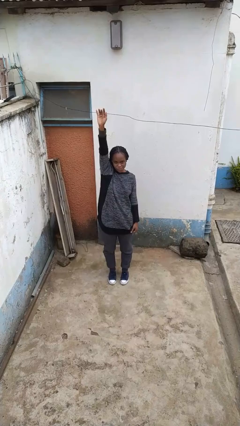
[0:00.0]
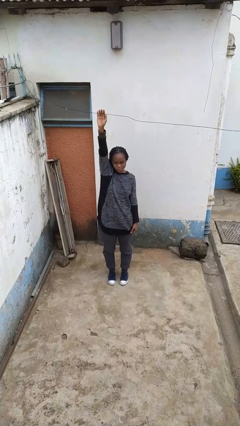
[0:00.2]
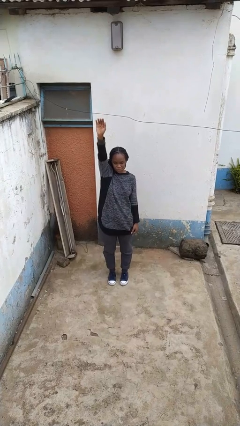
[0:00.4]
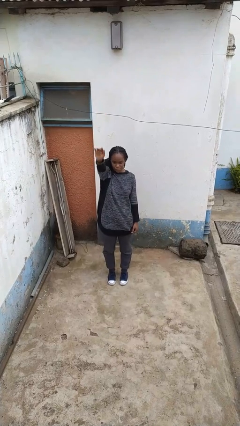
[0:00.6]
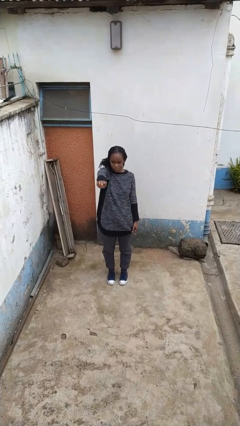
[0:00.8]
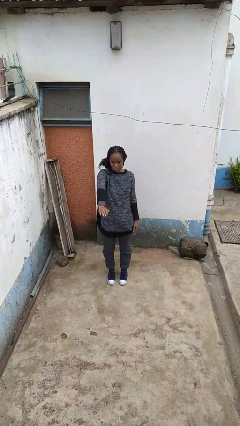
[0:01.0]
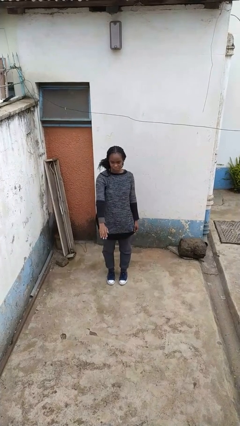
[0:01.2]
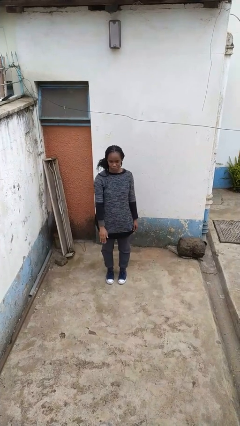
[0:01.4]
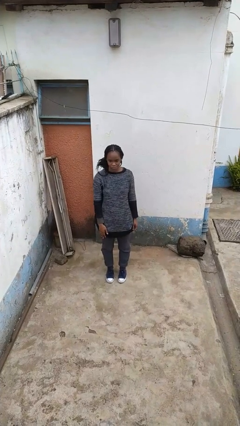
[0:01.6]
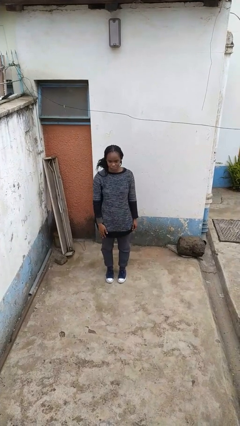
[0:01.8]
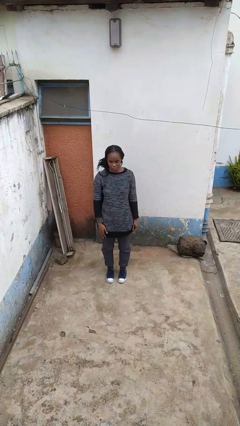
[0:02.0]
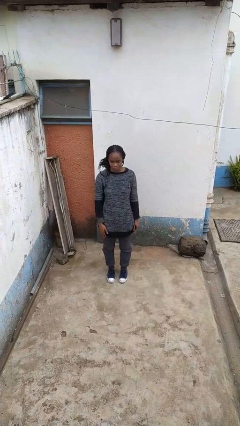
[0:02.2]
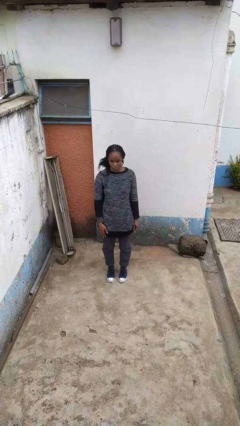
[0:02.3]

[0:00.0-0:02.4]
person gestures lower hand

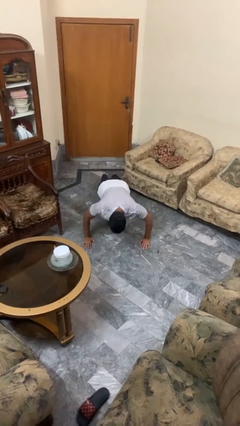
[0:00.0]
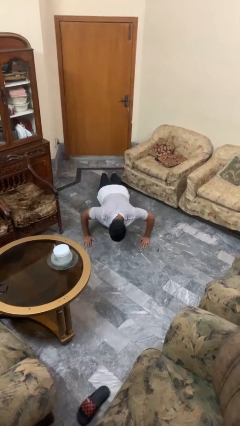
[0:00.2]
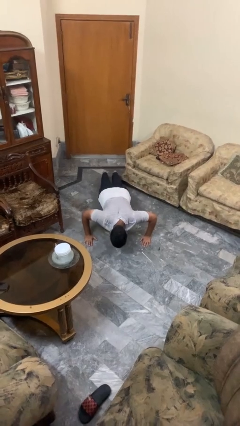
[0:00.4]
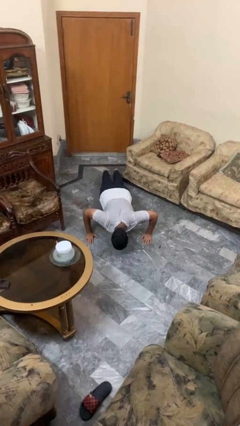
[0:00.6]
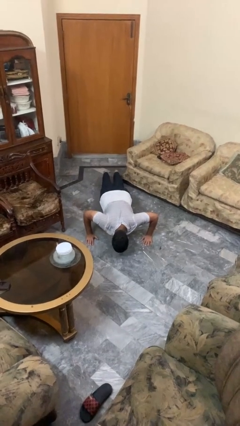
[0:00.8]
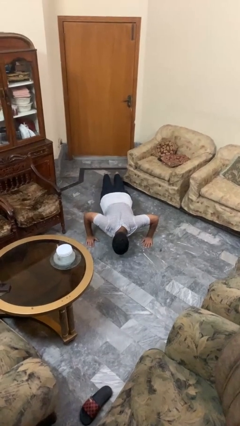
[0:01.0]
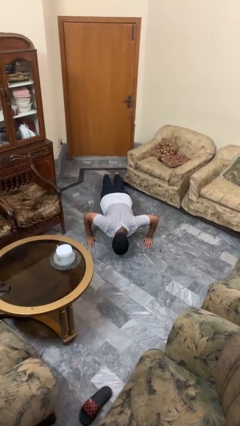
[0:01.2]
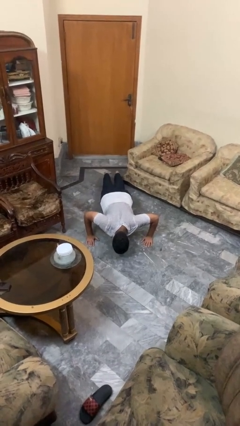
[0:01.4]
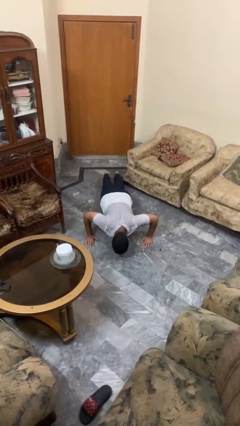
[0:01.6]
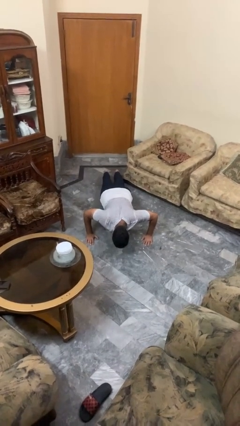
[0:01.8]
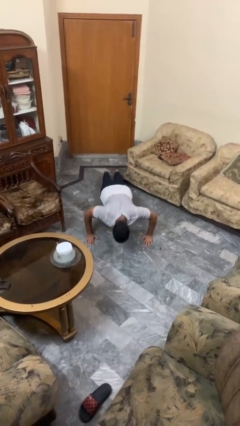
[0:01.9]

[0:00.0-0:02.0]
person exercises with pushup

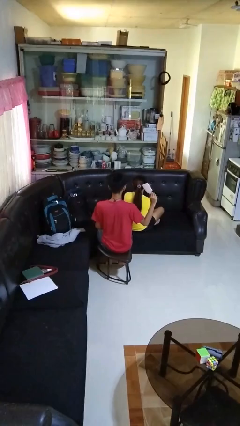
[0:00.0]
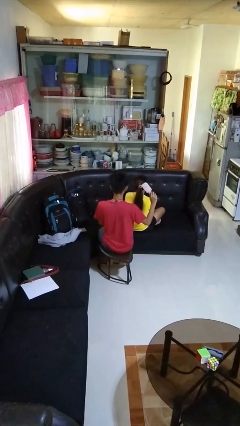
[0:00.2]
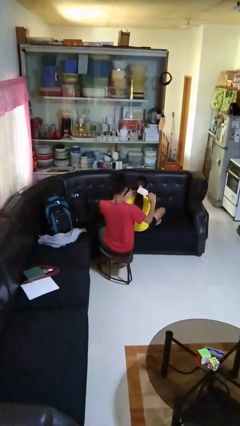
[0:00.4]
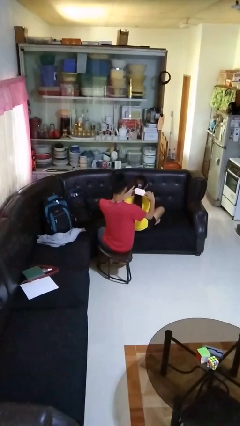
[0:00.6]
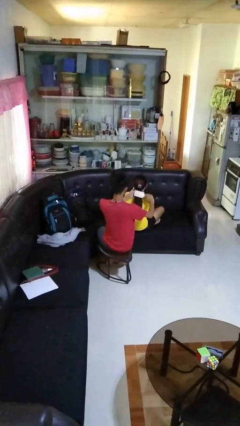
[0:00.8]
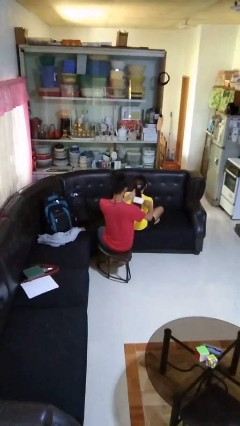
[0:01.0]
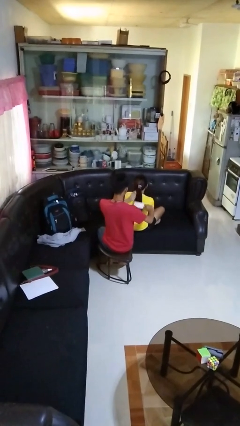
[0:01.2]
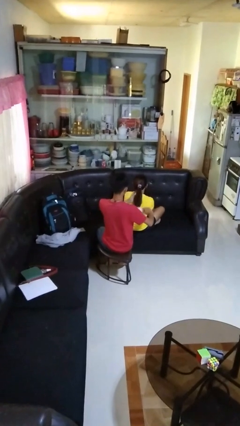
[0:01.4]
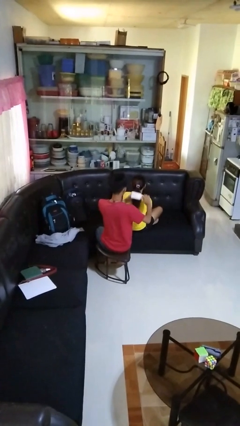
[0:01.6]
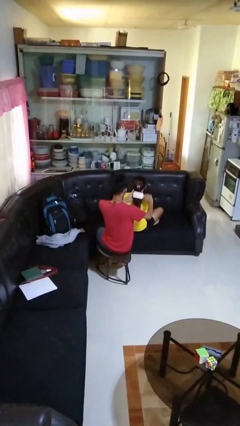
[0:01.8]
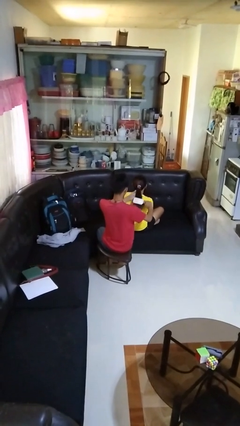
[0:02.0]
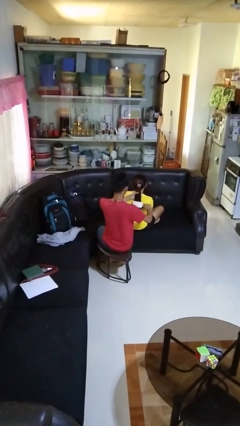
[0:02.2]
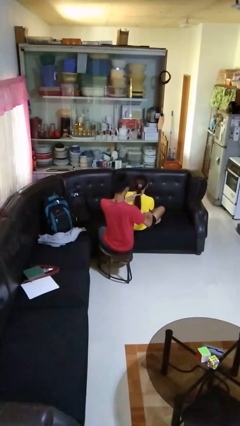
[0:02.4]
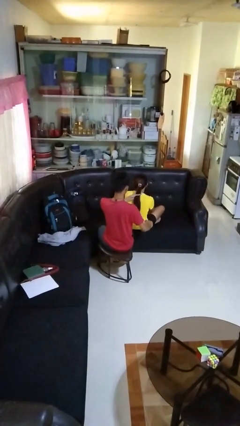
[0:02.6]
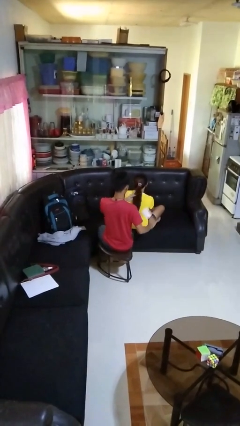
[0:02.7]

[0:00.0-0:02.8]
person brushes hair of person

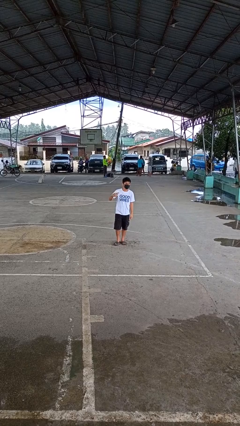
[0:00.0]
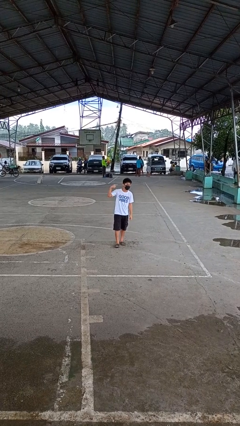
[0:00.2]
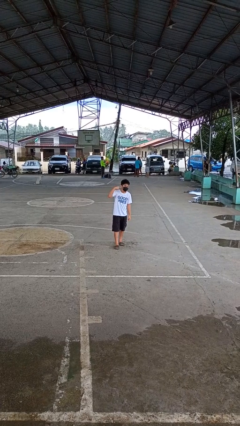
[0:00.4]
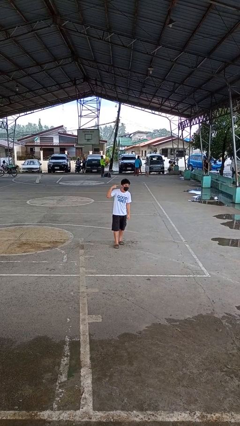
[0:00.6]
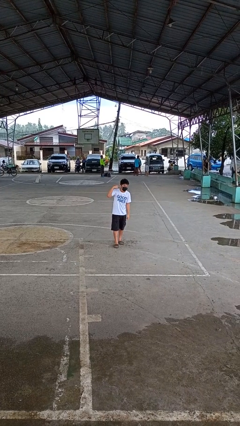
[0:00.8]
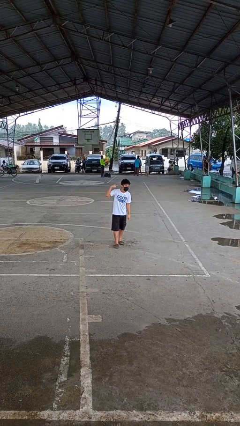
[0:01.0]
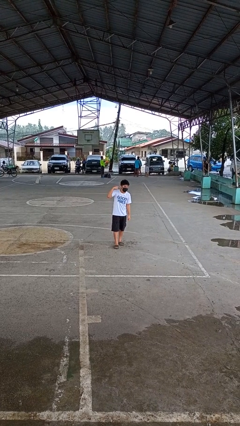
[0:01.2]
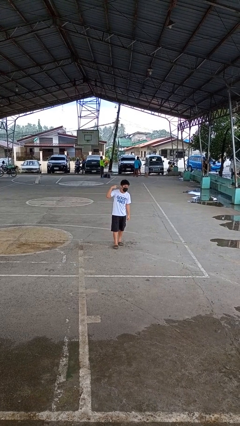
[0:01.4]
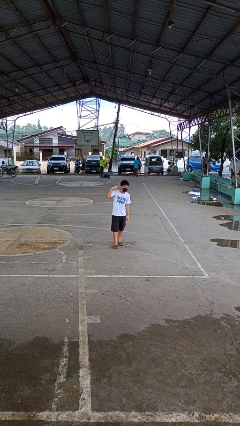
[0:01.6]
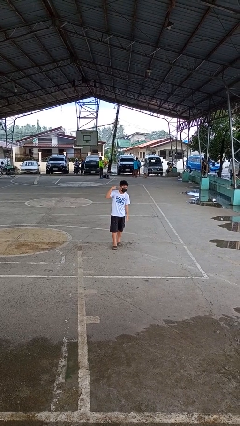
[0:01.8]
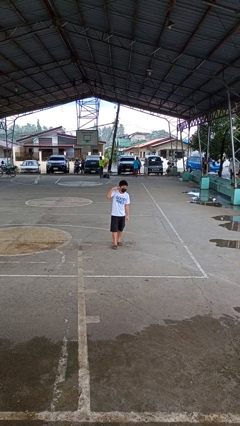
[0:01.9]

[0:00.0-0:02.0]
person gestures listen closely

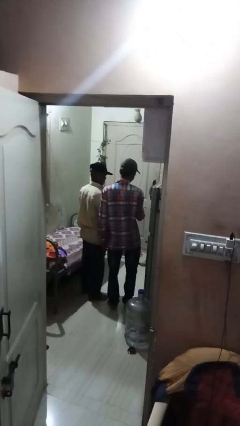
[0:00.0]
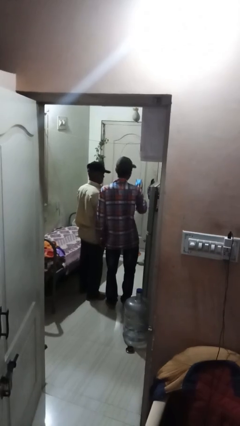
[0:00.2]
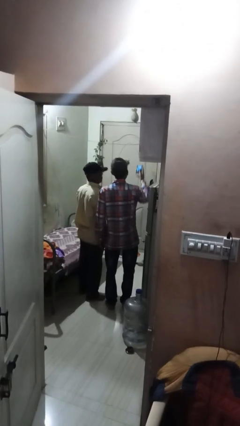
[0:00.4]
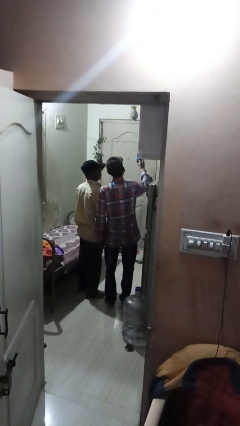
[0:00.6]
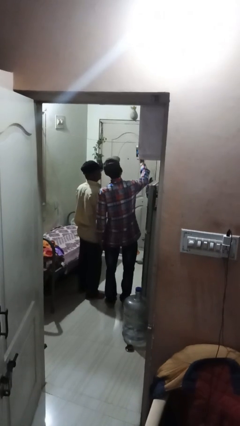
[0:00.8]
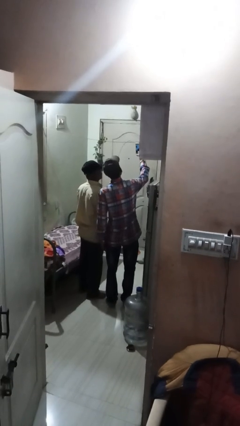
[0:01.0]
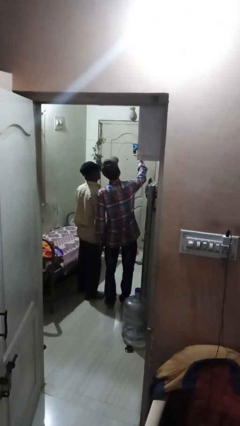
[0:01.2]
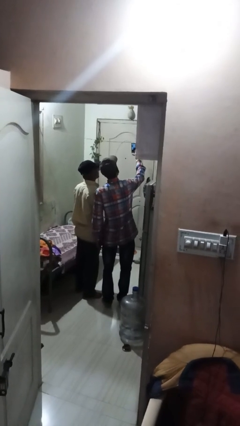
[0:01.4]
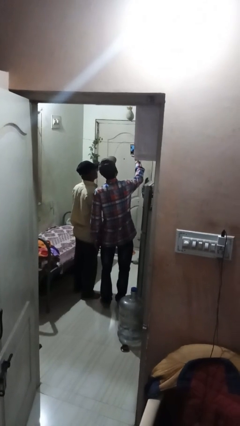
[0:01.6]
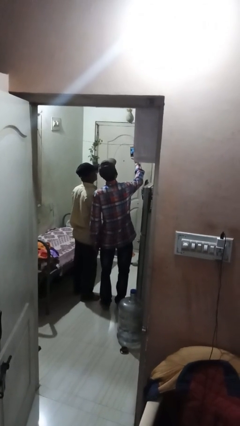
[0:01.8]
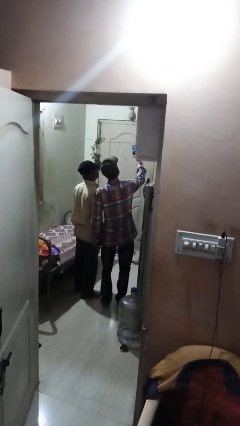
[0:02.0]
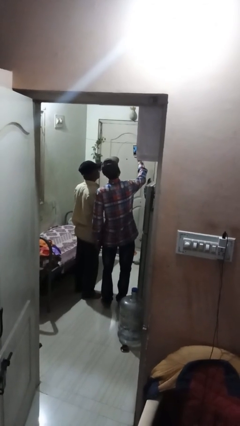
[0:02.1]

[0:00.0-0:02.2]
person takes selfie with person

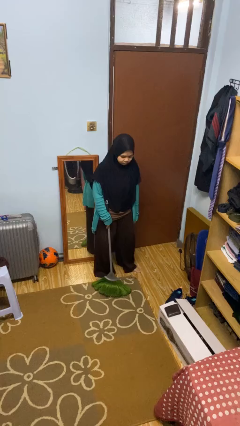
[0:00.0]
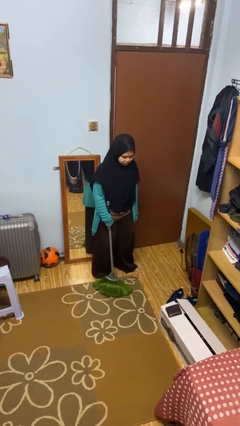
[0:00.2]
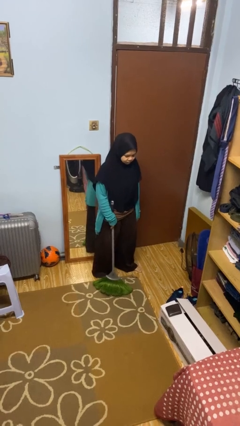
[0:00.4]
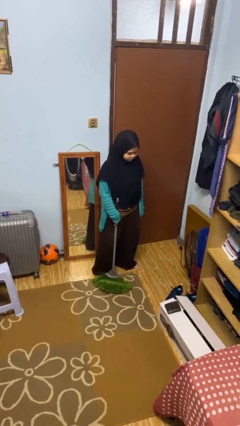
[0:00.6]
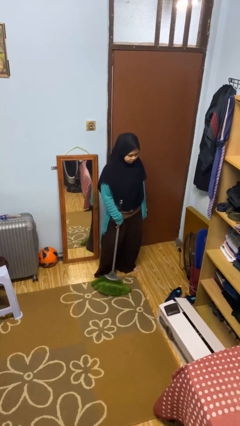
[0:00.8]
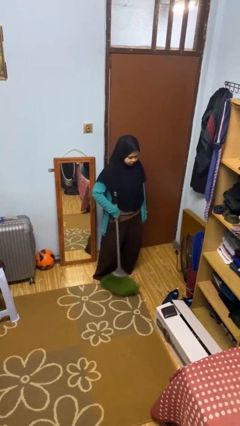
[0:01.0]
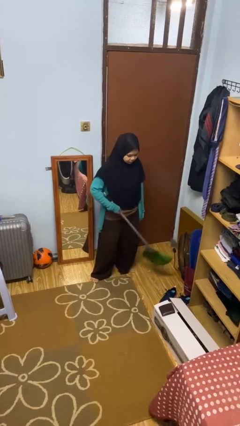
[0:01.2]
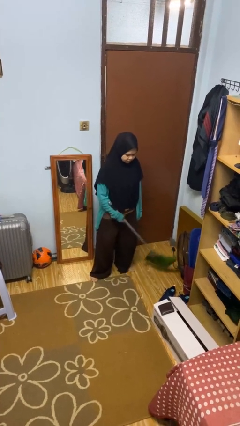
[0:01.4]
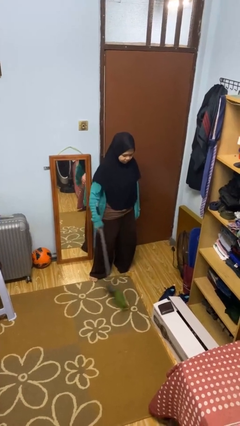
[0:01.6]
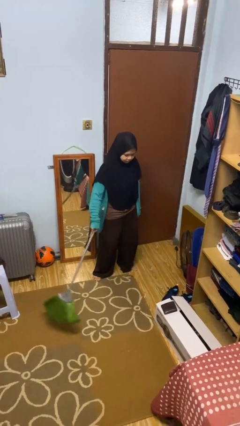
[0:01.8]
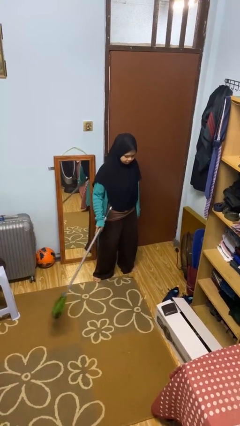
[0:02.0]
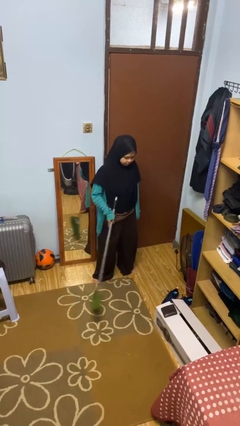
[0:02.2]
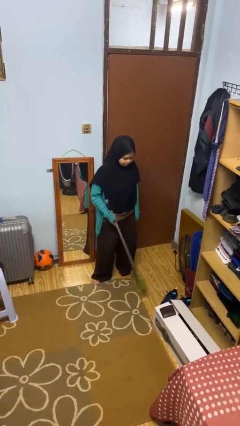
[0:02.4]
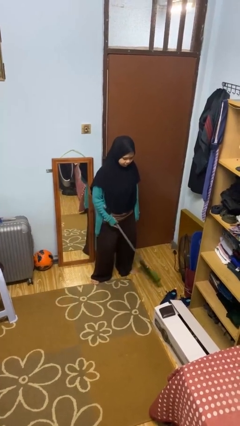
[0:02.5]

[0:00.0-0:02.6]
person sweeps floor

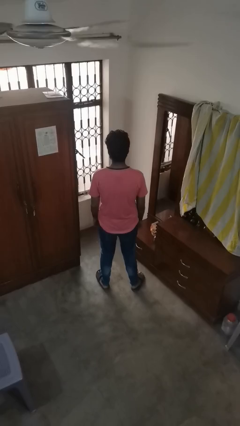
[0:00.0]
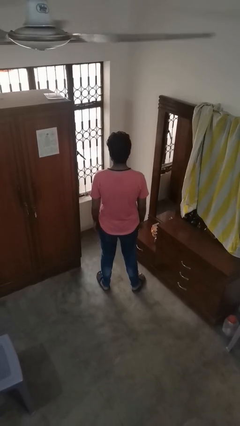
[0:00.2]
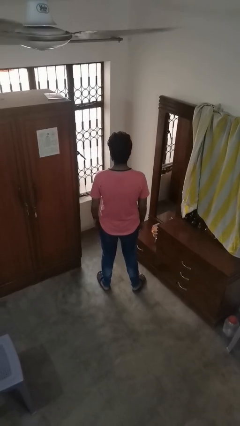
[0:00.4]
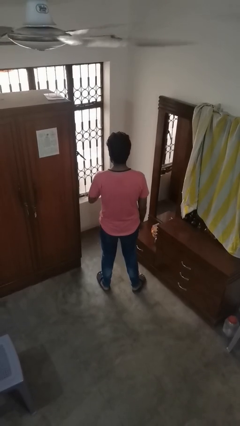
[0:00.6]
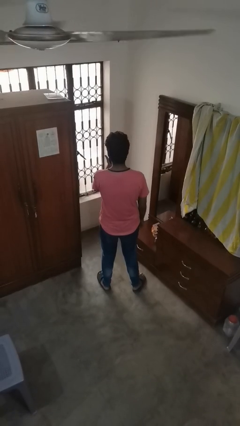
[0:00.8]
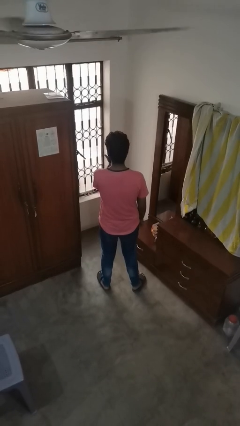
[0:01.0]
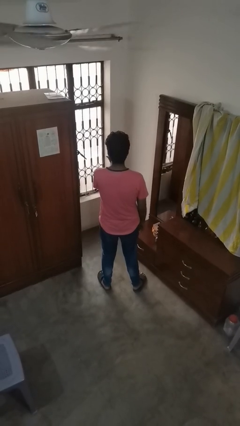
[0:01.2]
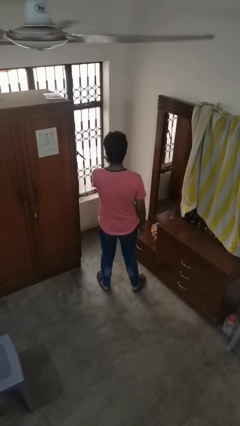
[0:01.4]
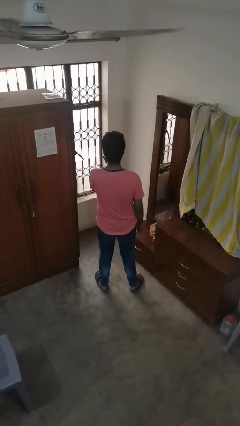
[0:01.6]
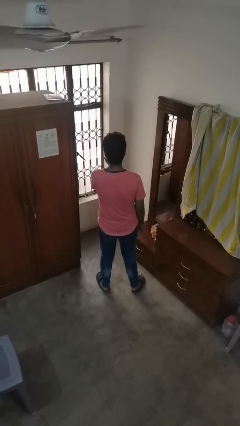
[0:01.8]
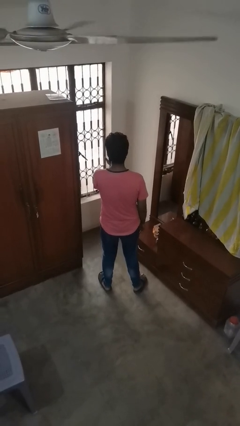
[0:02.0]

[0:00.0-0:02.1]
person licks fingers

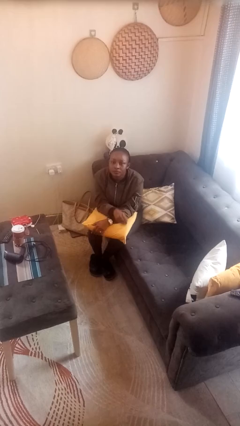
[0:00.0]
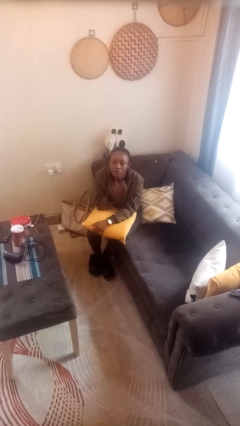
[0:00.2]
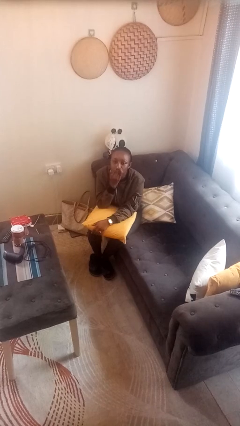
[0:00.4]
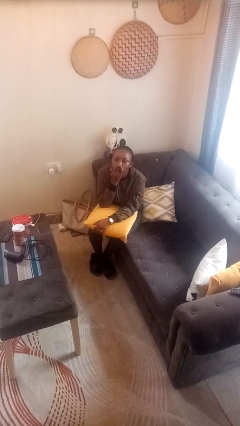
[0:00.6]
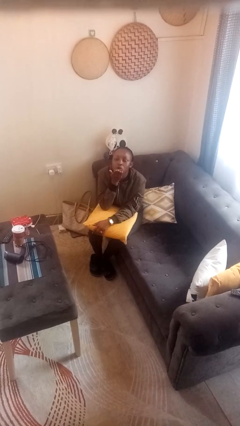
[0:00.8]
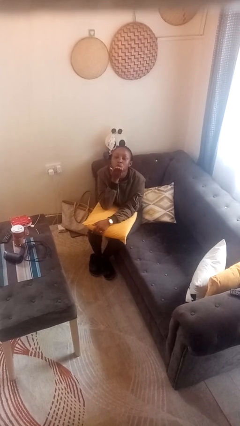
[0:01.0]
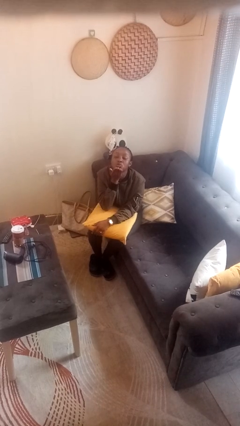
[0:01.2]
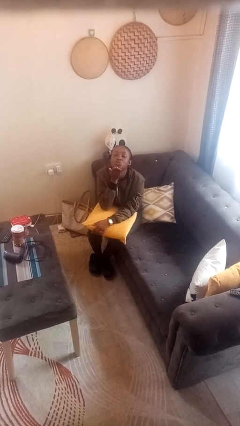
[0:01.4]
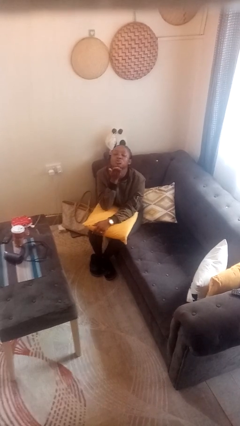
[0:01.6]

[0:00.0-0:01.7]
person gestures blow kiss
